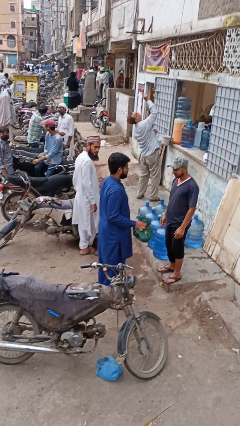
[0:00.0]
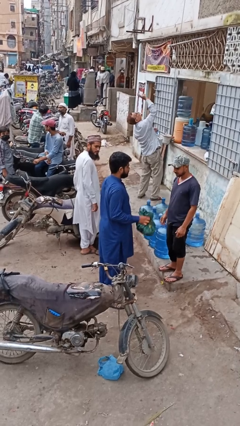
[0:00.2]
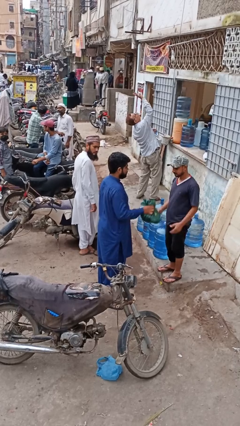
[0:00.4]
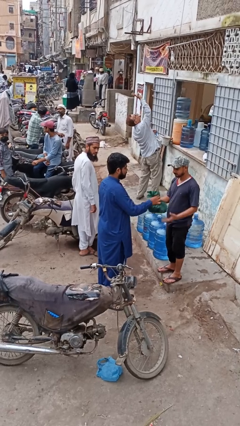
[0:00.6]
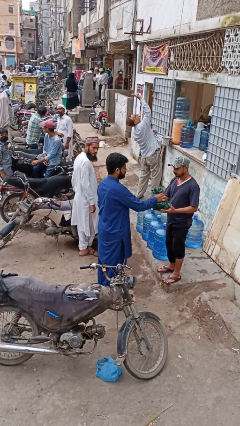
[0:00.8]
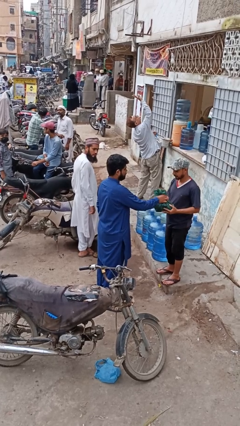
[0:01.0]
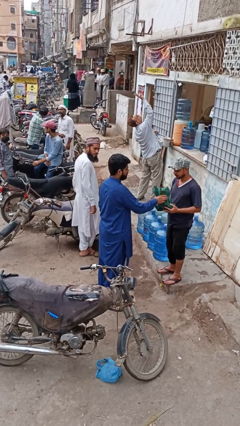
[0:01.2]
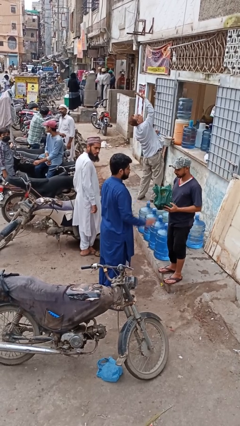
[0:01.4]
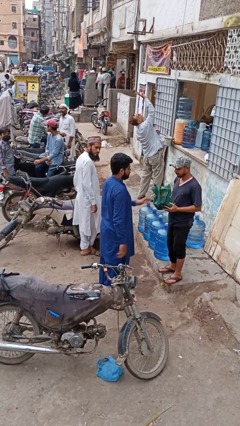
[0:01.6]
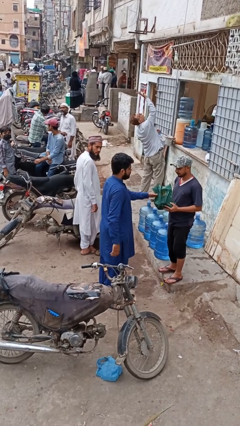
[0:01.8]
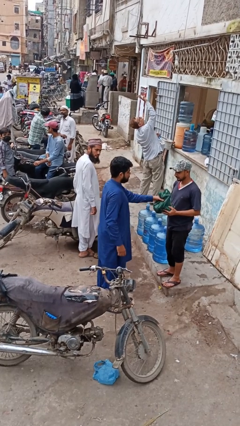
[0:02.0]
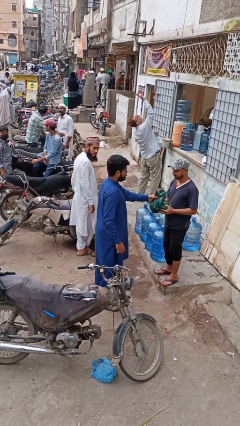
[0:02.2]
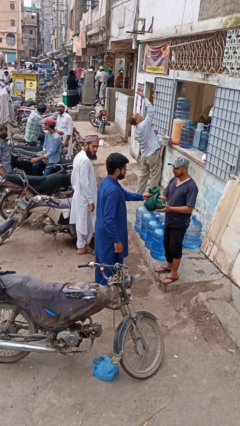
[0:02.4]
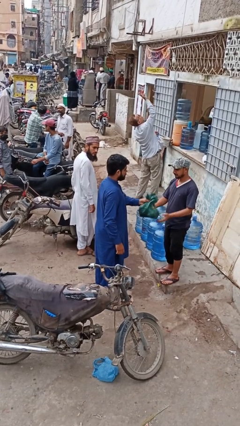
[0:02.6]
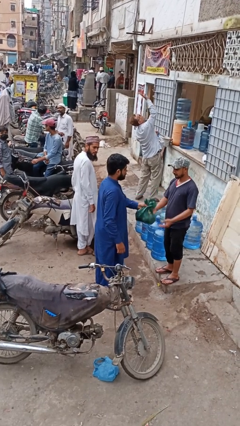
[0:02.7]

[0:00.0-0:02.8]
person transfers object to person

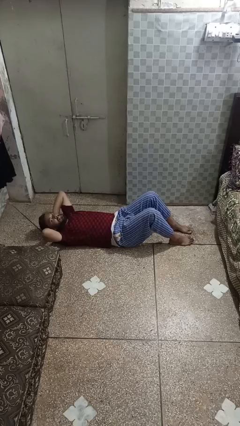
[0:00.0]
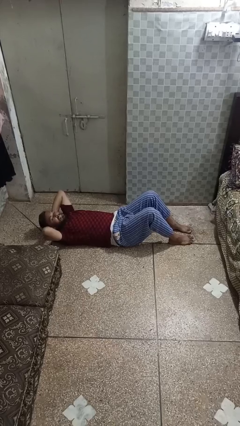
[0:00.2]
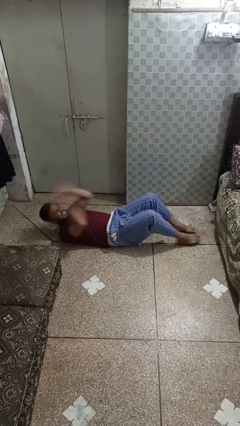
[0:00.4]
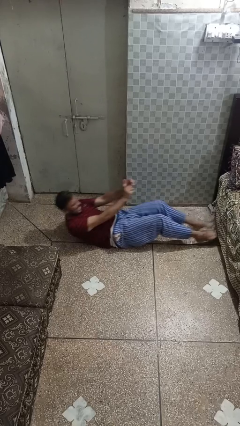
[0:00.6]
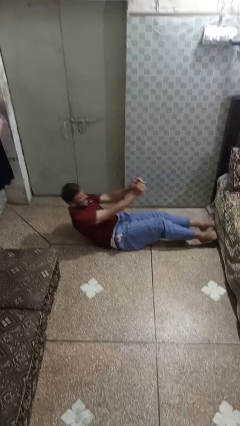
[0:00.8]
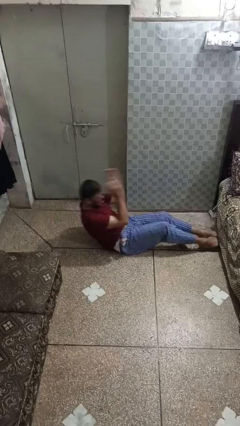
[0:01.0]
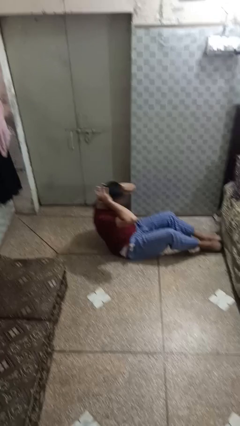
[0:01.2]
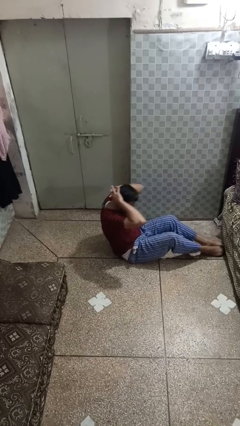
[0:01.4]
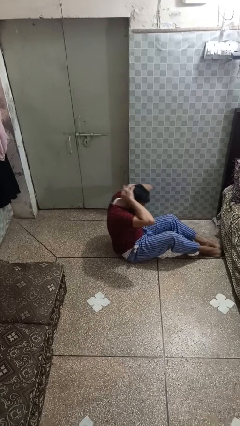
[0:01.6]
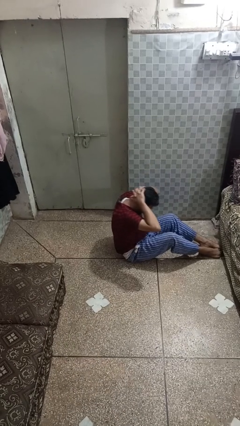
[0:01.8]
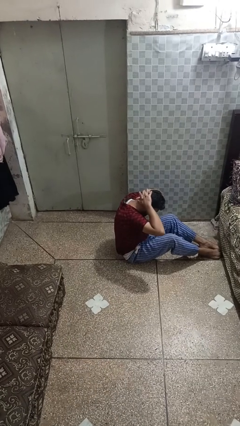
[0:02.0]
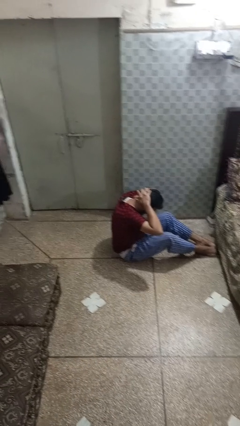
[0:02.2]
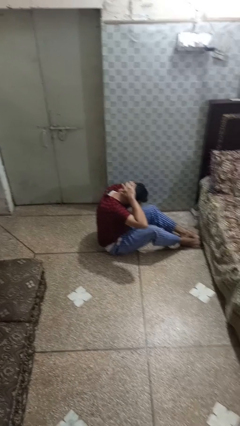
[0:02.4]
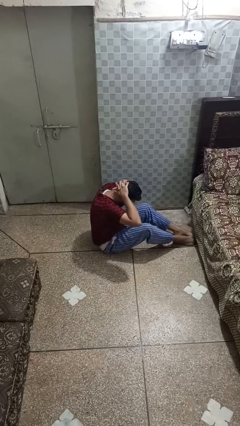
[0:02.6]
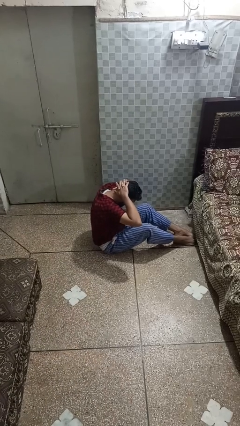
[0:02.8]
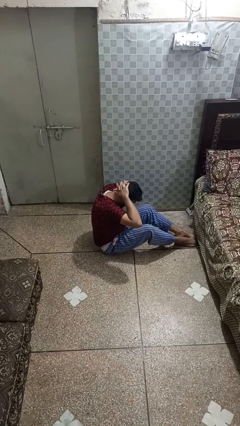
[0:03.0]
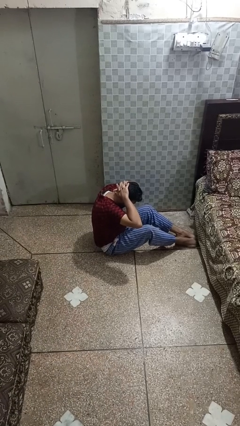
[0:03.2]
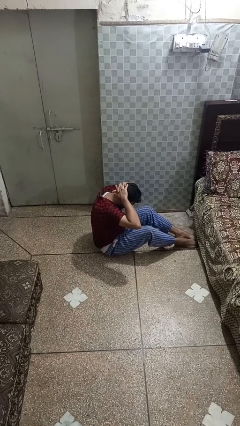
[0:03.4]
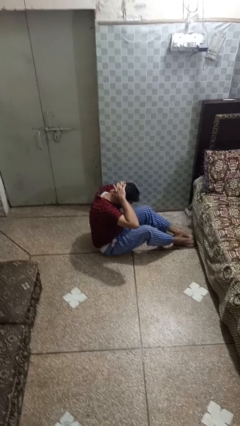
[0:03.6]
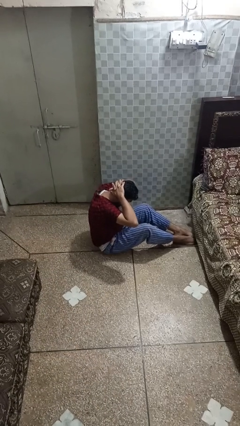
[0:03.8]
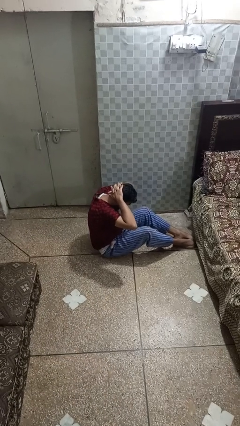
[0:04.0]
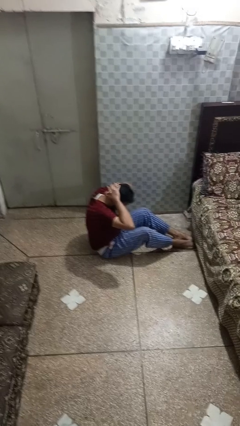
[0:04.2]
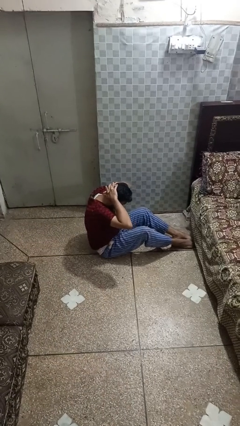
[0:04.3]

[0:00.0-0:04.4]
person exercises with situp

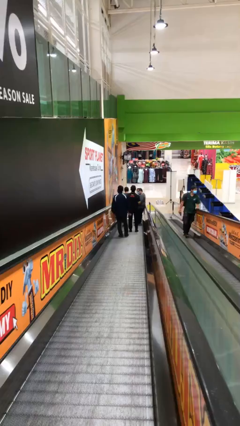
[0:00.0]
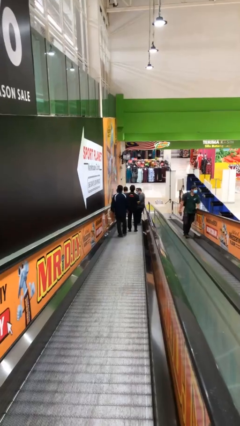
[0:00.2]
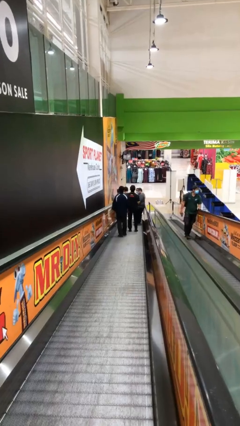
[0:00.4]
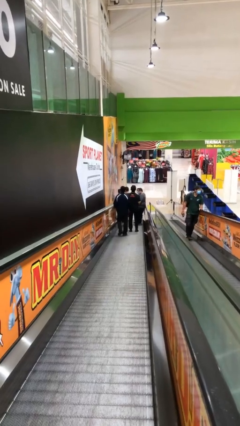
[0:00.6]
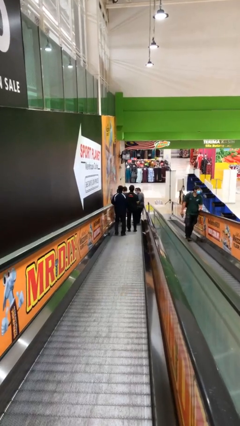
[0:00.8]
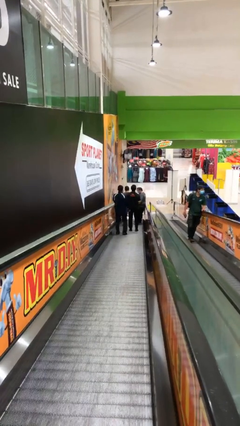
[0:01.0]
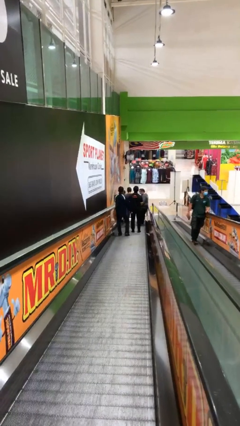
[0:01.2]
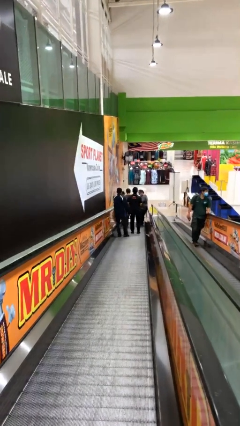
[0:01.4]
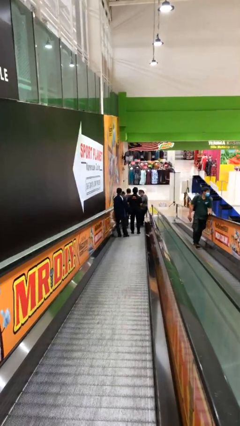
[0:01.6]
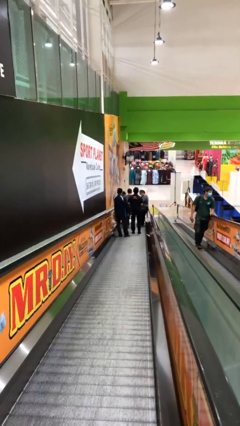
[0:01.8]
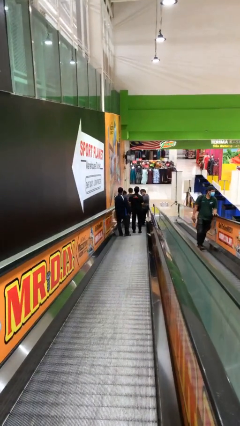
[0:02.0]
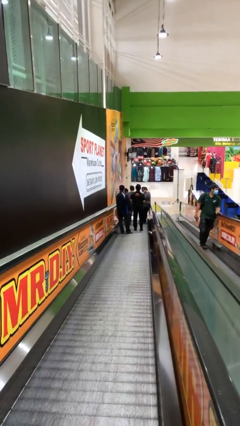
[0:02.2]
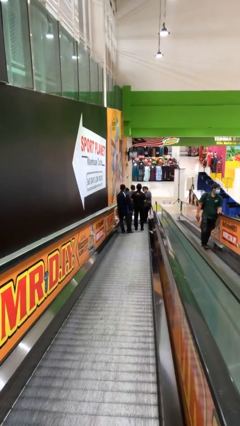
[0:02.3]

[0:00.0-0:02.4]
person talks to person

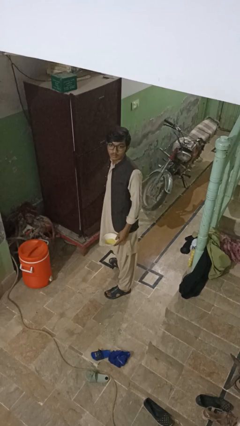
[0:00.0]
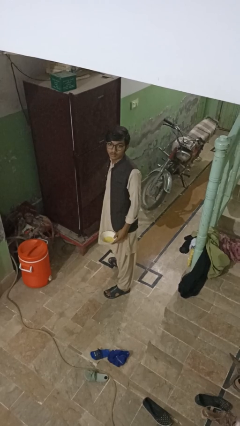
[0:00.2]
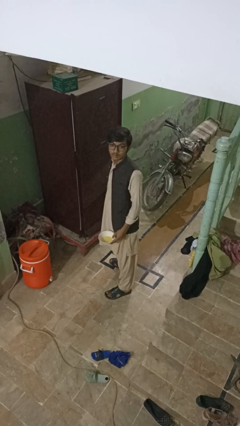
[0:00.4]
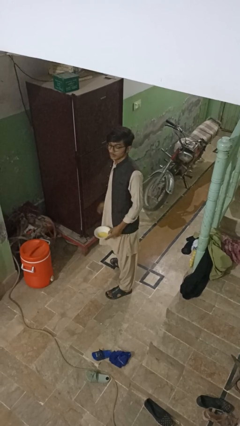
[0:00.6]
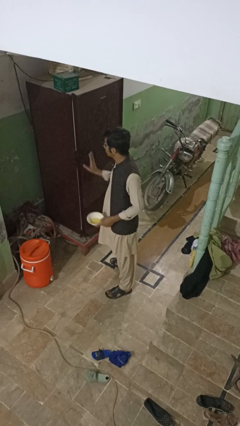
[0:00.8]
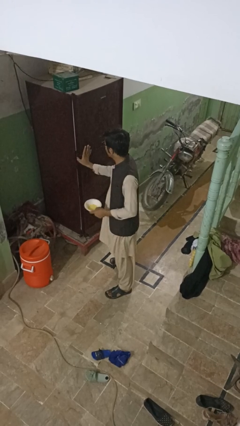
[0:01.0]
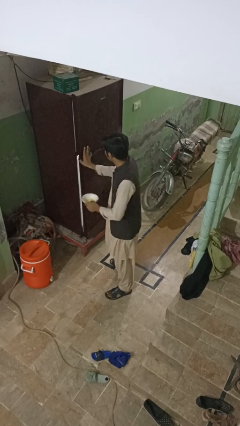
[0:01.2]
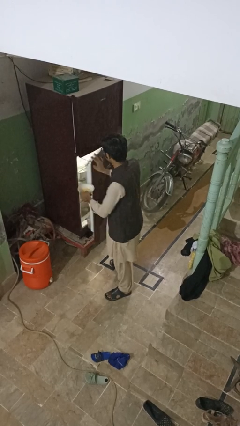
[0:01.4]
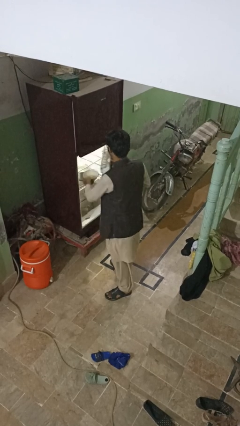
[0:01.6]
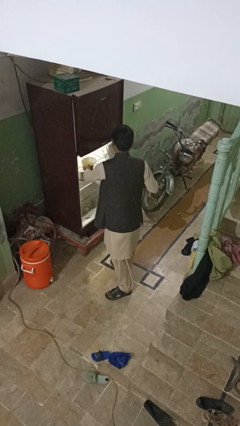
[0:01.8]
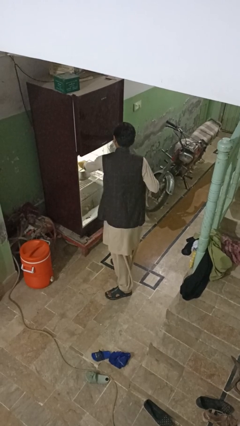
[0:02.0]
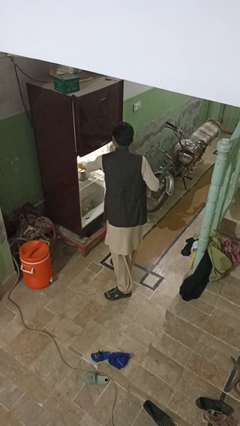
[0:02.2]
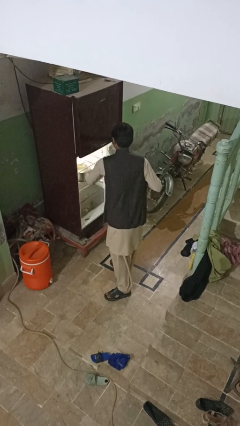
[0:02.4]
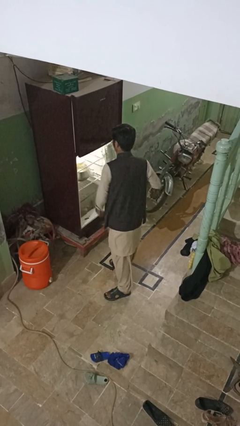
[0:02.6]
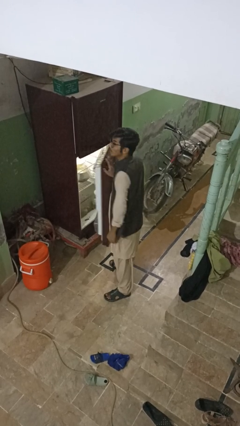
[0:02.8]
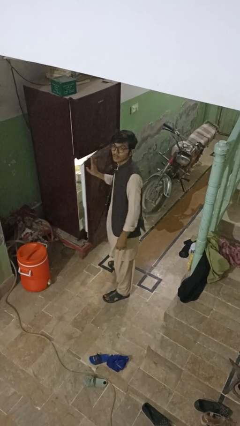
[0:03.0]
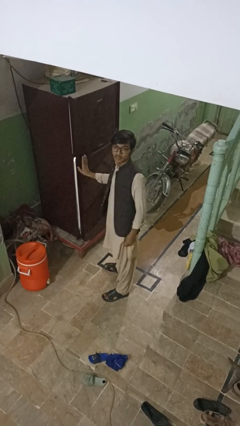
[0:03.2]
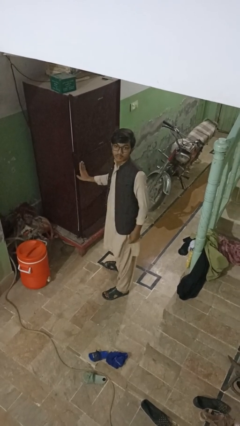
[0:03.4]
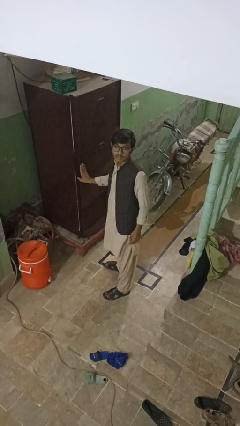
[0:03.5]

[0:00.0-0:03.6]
person puts object into refrigerator

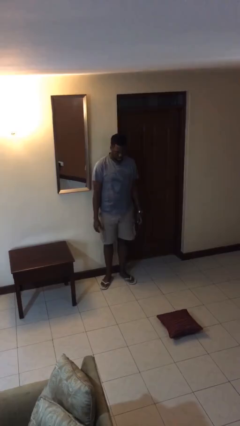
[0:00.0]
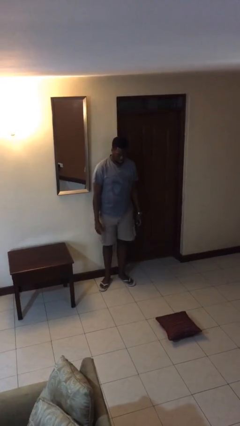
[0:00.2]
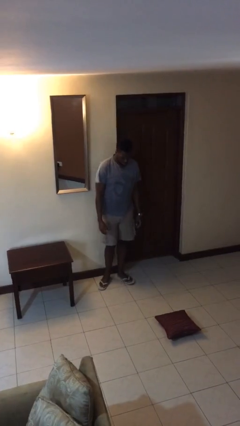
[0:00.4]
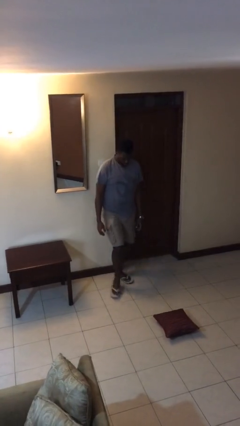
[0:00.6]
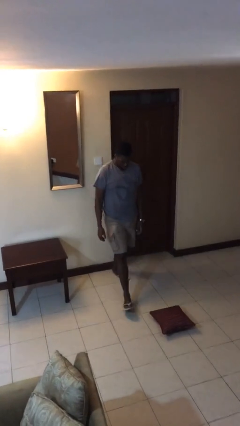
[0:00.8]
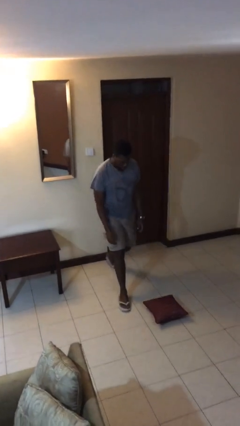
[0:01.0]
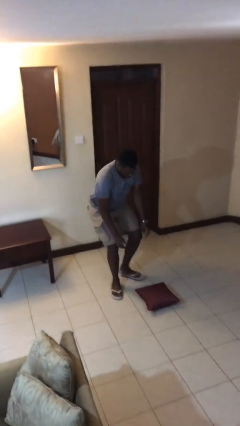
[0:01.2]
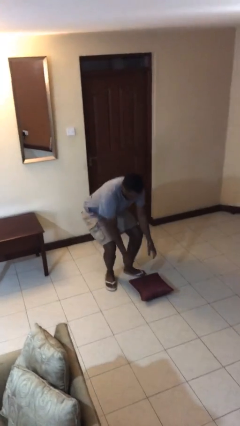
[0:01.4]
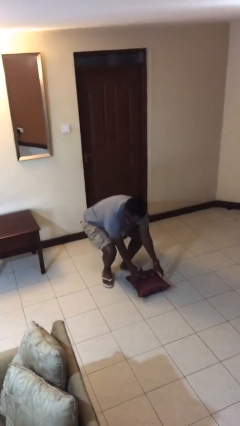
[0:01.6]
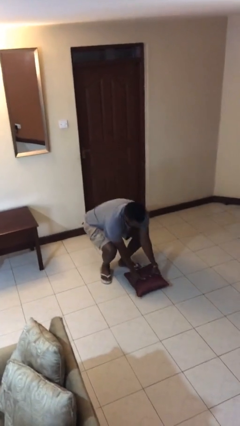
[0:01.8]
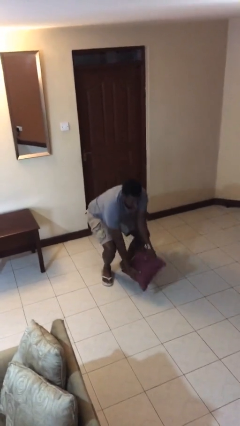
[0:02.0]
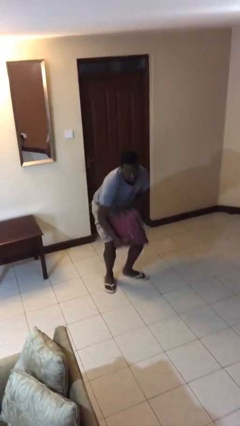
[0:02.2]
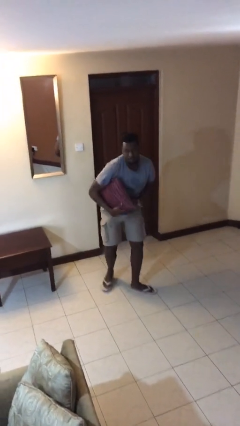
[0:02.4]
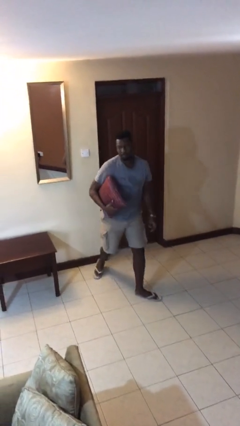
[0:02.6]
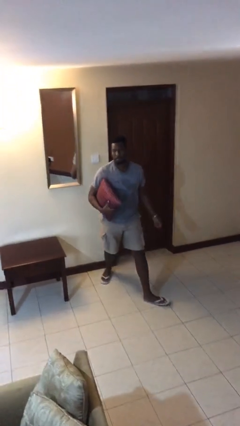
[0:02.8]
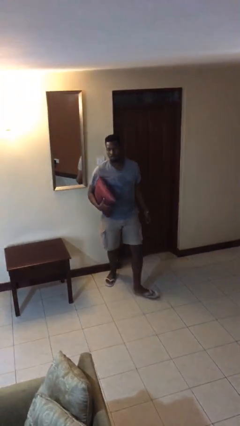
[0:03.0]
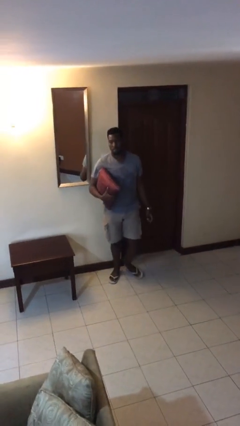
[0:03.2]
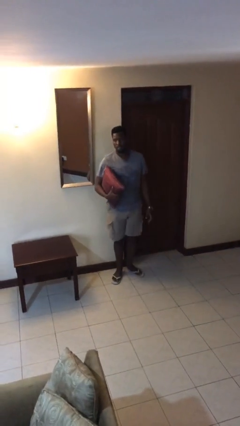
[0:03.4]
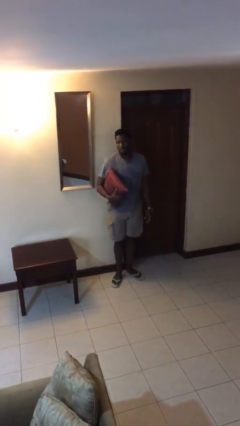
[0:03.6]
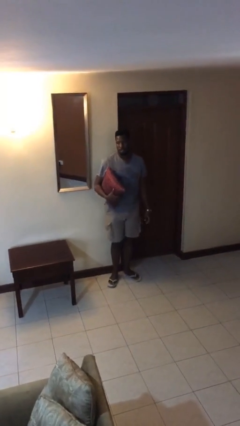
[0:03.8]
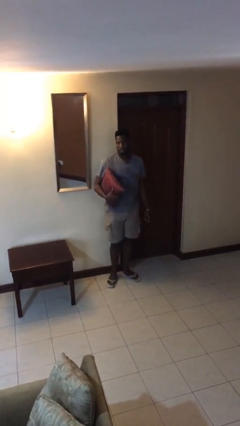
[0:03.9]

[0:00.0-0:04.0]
person picks up object from floor

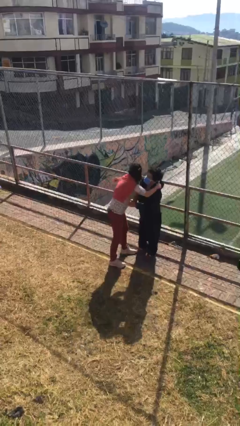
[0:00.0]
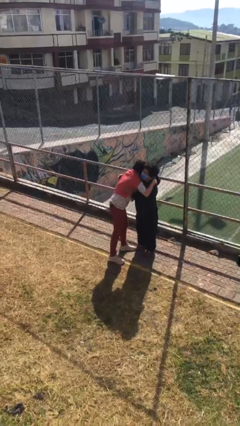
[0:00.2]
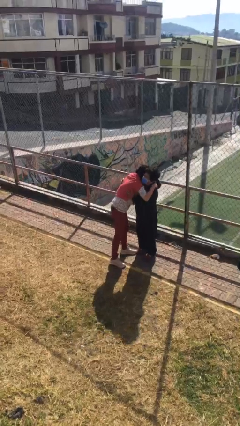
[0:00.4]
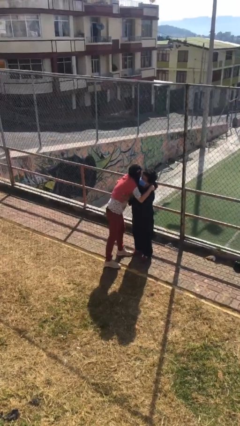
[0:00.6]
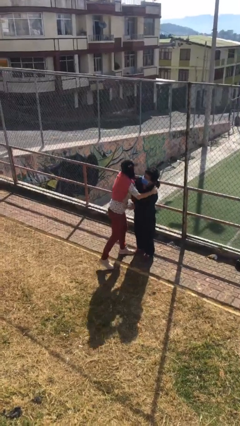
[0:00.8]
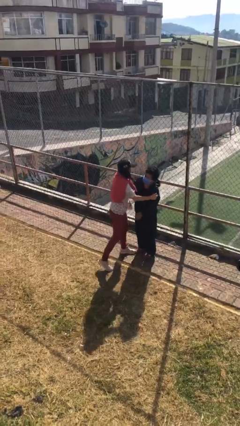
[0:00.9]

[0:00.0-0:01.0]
person embraces person
